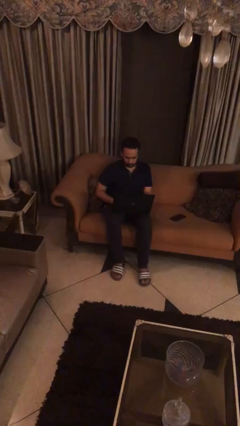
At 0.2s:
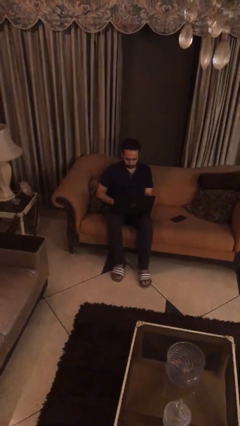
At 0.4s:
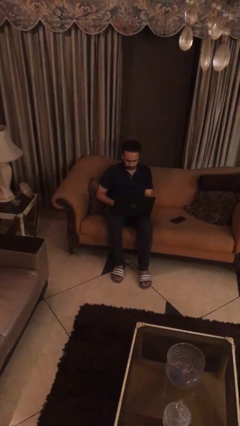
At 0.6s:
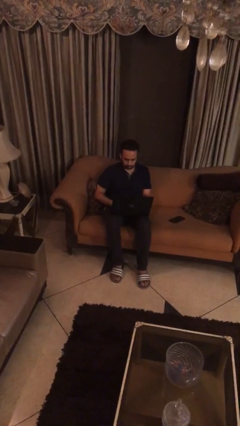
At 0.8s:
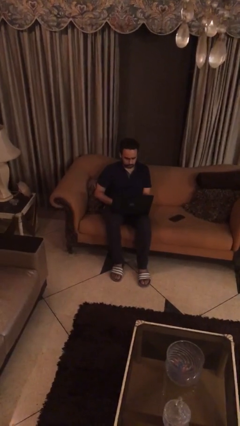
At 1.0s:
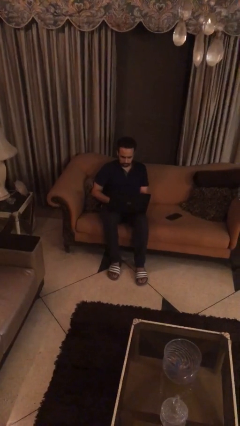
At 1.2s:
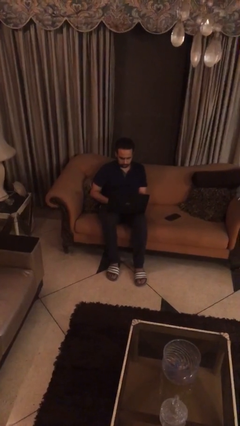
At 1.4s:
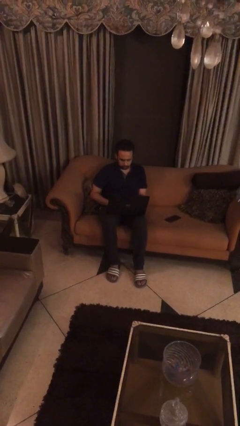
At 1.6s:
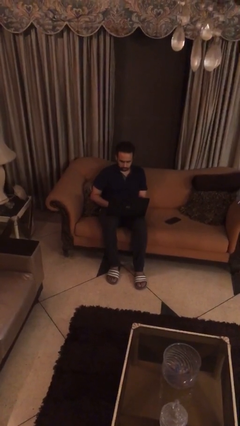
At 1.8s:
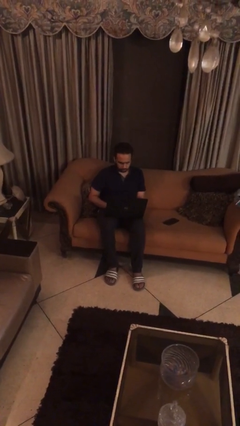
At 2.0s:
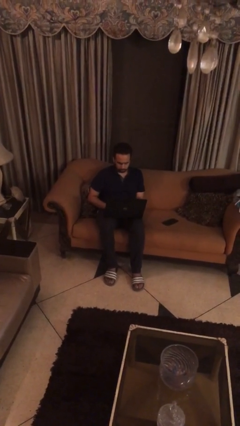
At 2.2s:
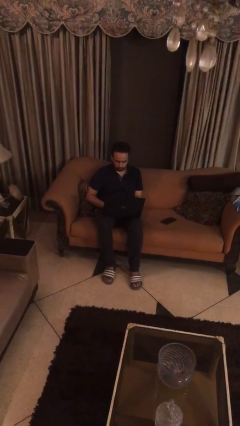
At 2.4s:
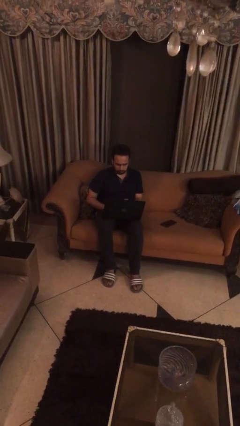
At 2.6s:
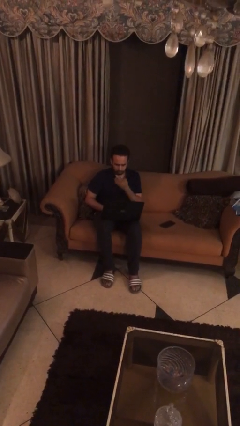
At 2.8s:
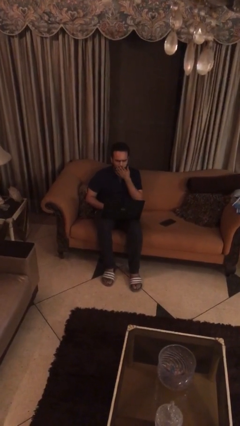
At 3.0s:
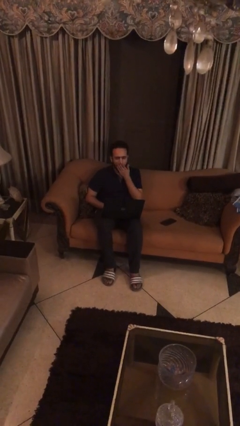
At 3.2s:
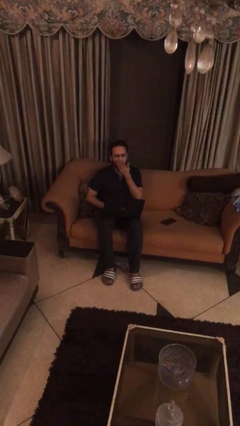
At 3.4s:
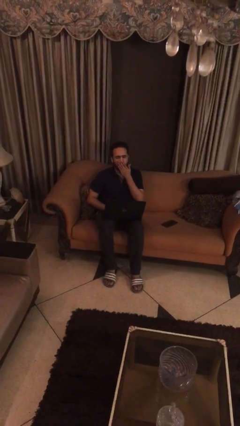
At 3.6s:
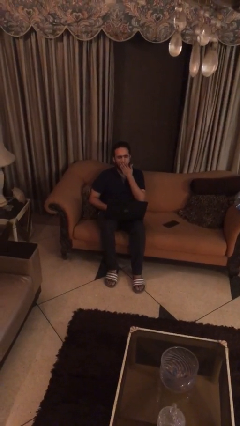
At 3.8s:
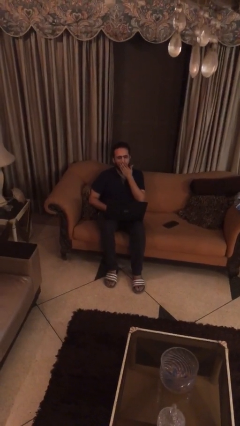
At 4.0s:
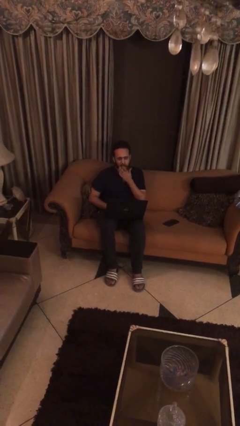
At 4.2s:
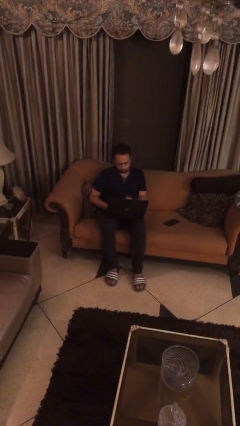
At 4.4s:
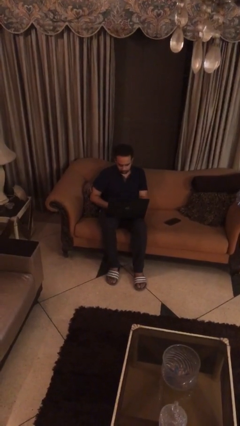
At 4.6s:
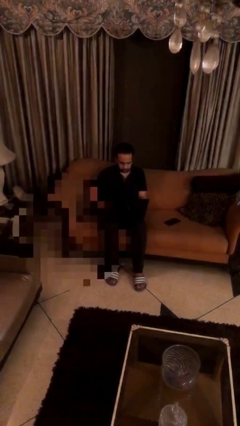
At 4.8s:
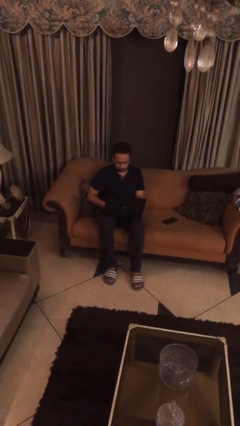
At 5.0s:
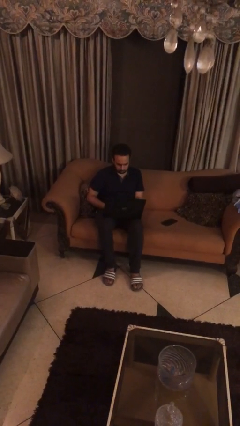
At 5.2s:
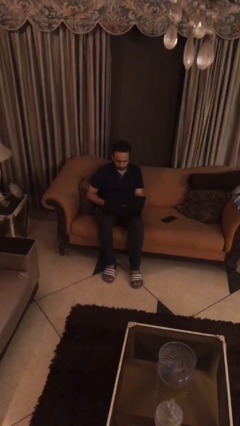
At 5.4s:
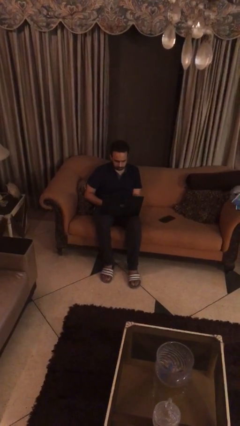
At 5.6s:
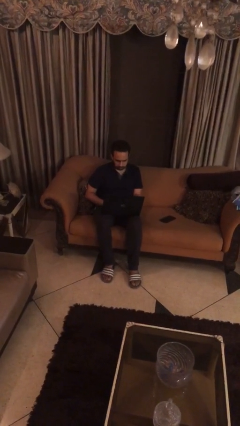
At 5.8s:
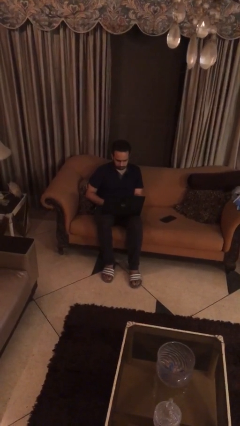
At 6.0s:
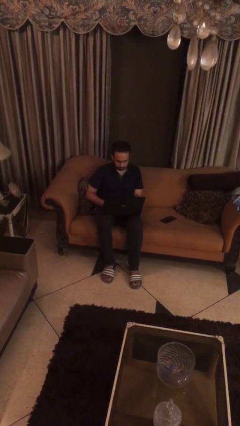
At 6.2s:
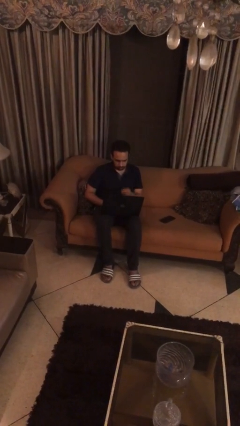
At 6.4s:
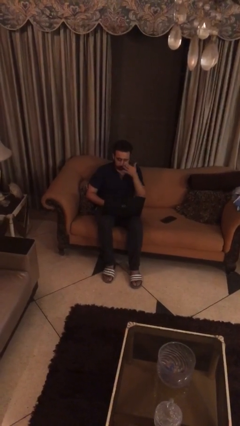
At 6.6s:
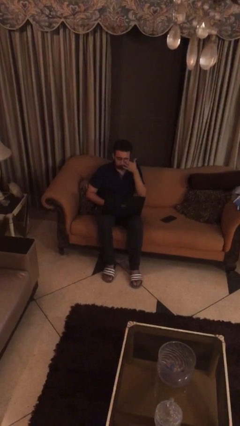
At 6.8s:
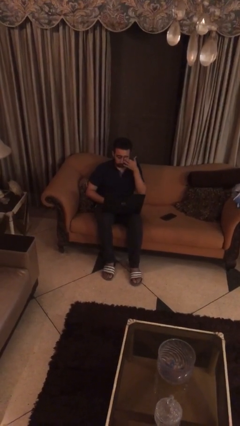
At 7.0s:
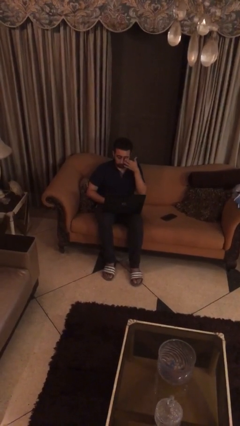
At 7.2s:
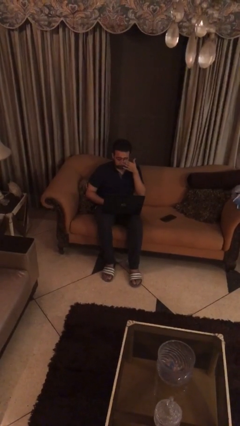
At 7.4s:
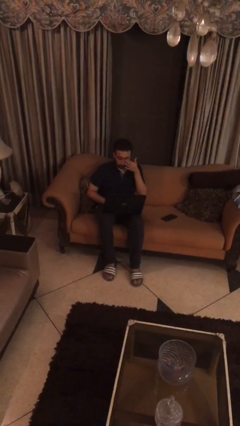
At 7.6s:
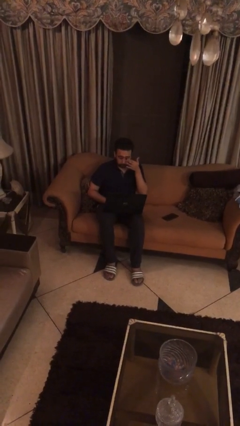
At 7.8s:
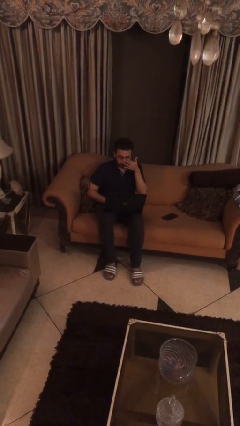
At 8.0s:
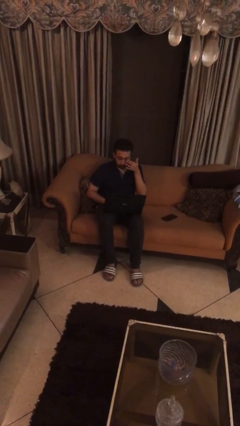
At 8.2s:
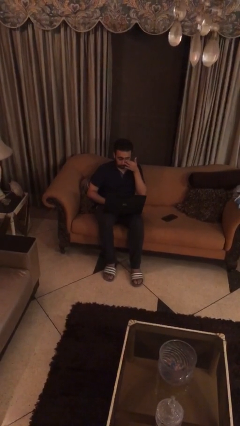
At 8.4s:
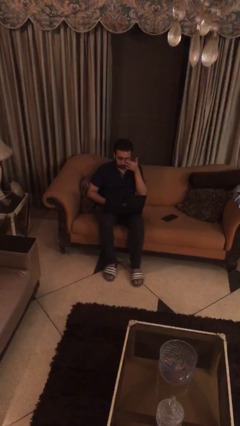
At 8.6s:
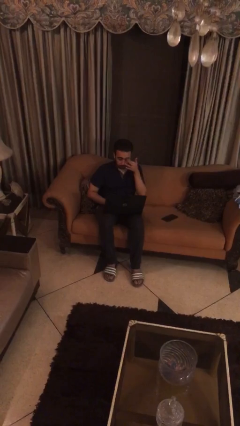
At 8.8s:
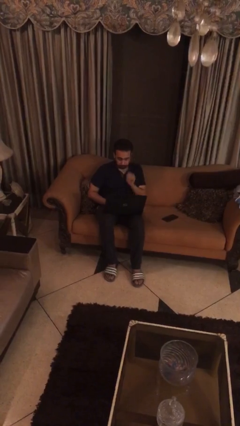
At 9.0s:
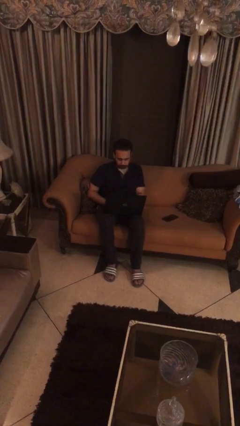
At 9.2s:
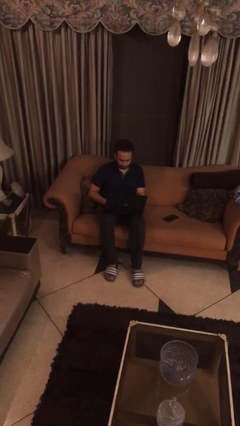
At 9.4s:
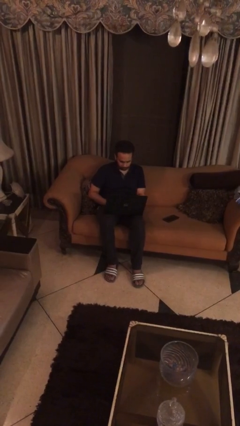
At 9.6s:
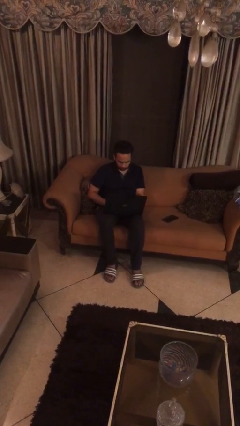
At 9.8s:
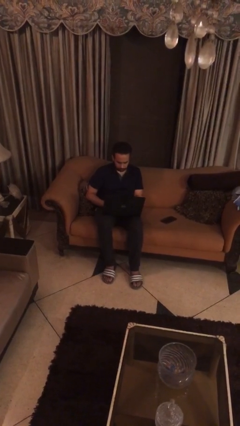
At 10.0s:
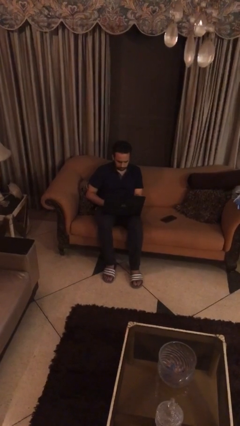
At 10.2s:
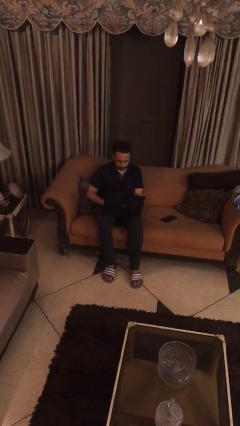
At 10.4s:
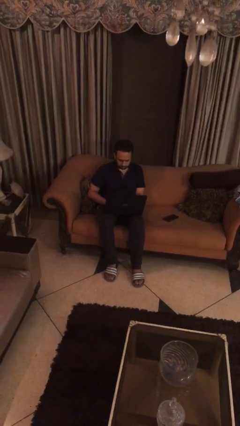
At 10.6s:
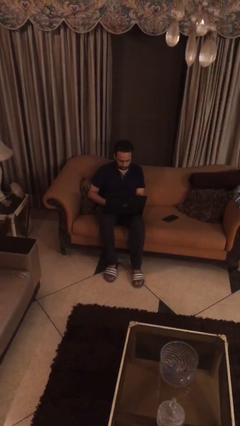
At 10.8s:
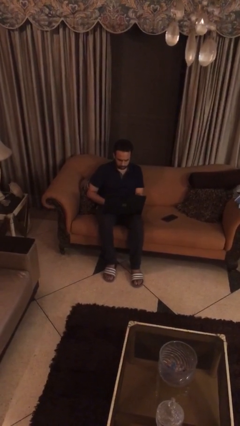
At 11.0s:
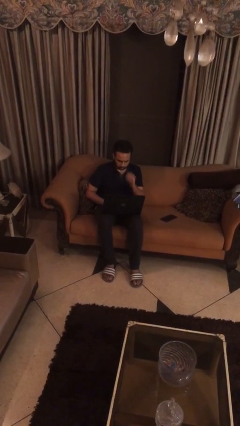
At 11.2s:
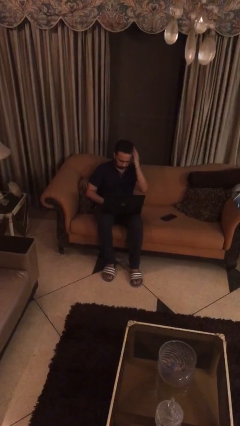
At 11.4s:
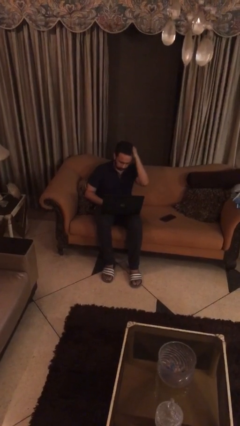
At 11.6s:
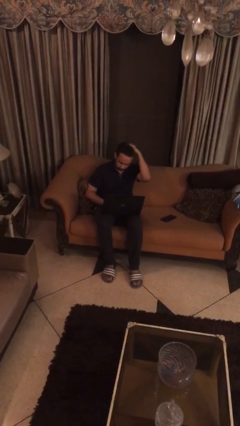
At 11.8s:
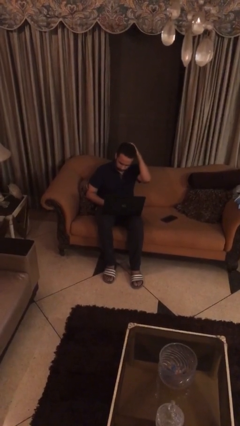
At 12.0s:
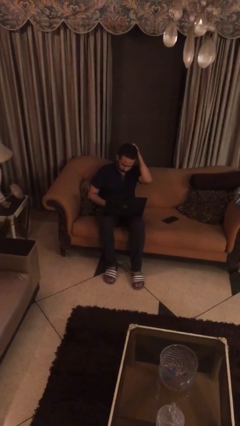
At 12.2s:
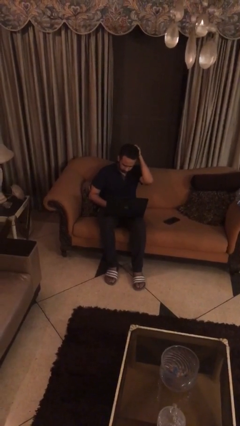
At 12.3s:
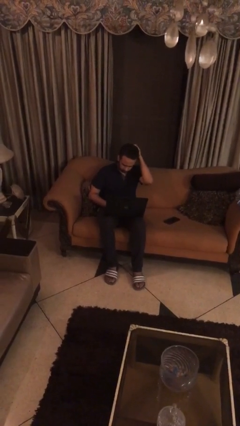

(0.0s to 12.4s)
person interacts with laptop

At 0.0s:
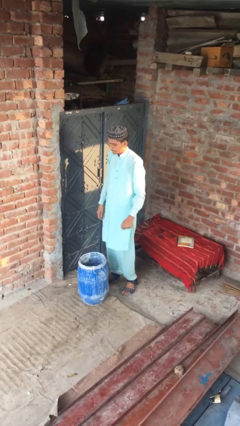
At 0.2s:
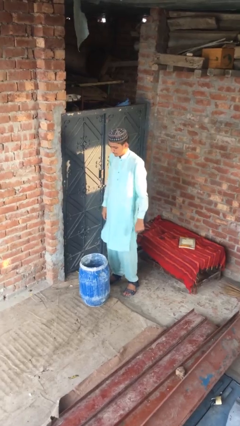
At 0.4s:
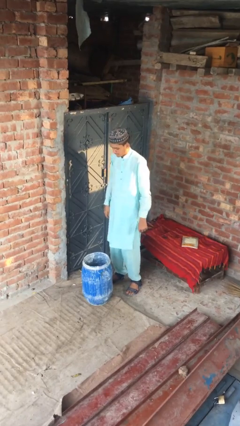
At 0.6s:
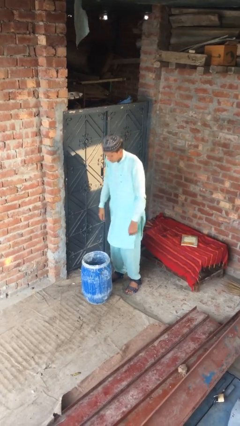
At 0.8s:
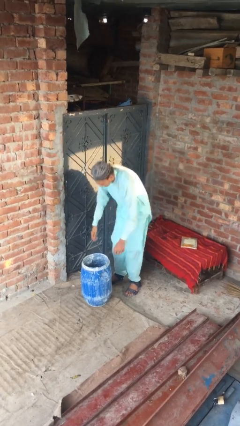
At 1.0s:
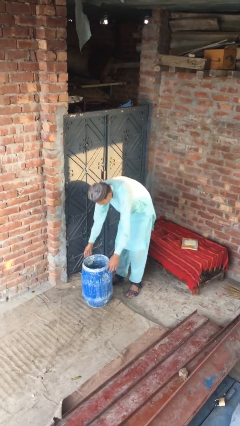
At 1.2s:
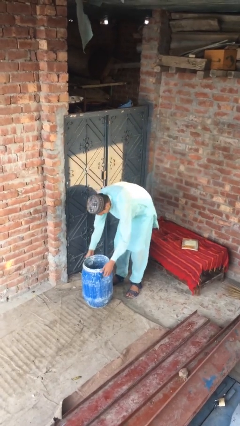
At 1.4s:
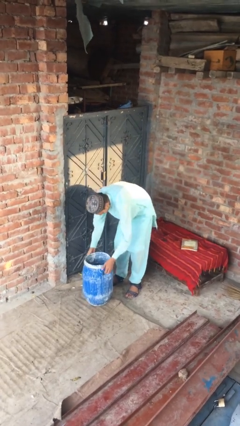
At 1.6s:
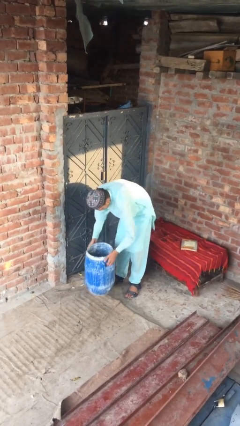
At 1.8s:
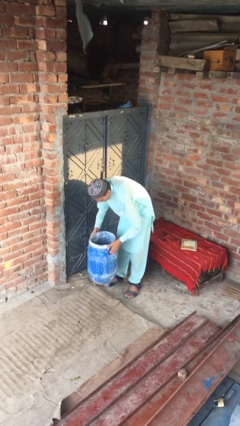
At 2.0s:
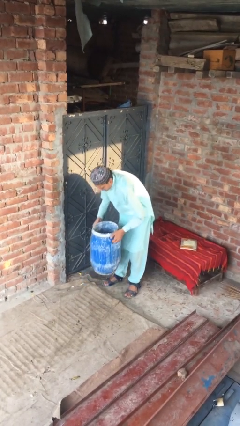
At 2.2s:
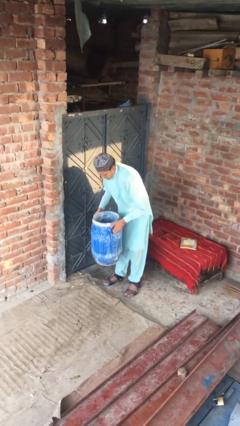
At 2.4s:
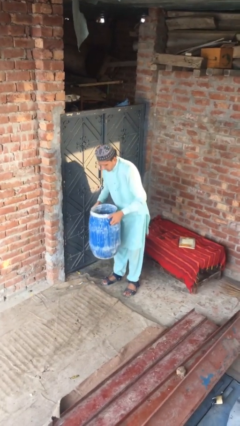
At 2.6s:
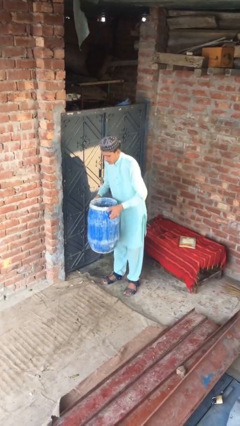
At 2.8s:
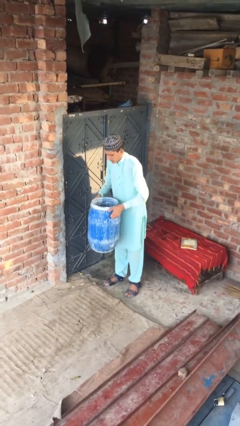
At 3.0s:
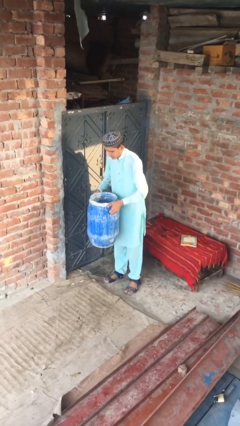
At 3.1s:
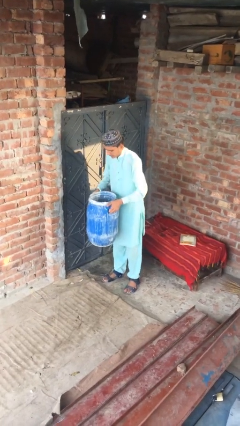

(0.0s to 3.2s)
person picks up object from floor

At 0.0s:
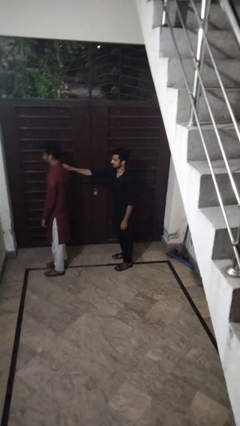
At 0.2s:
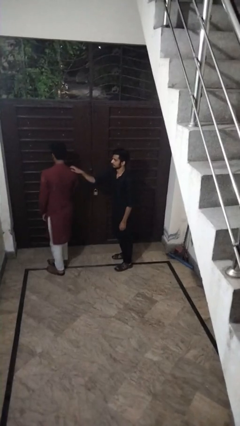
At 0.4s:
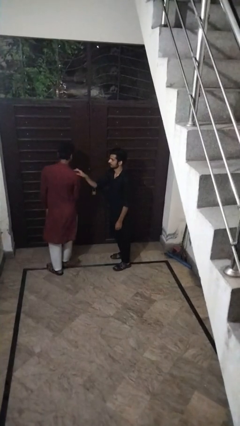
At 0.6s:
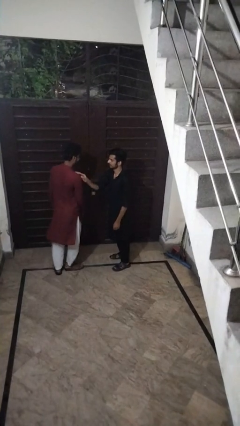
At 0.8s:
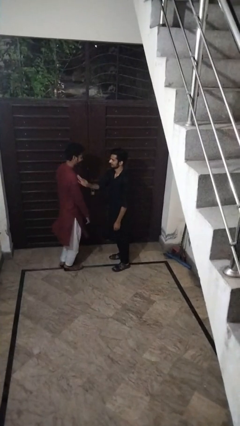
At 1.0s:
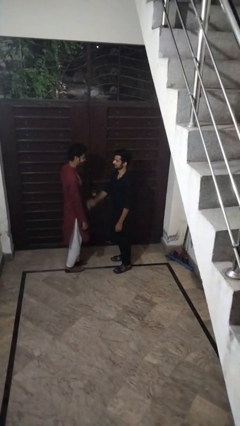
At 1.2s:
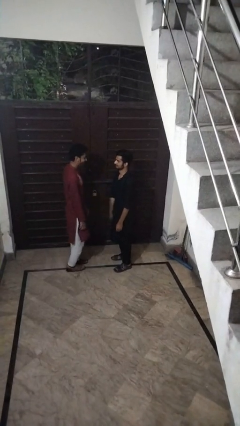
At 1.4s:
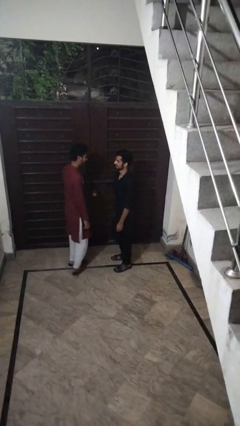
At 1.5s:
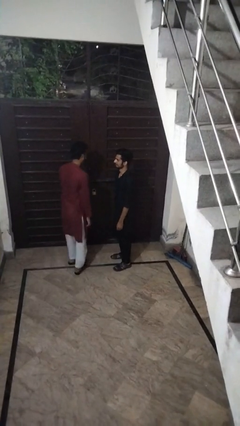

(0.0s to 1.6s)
person spins person around

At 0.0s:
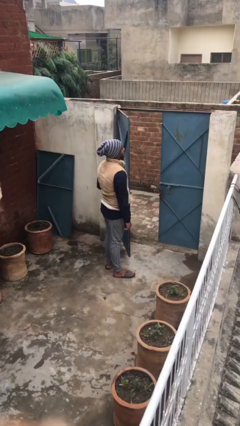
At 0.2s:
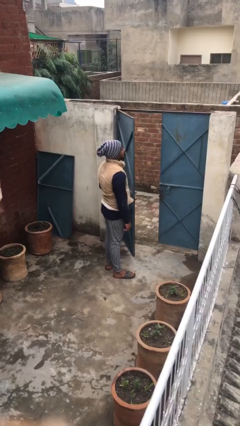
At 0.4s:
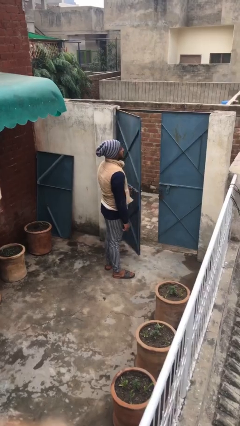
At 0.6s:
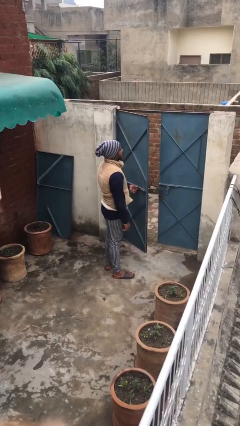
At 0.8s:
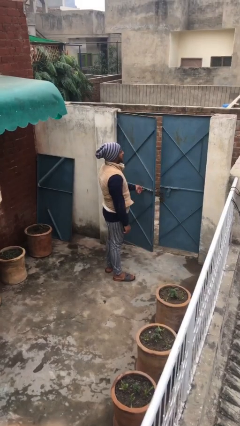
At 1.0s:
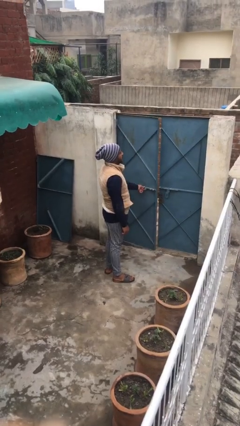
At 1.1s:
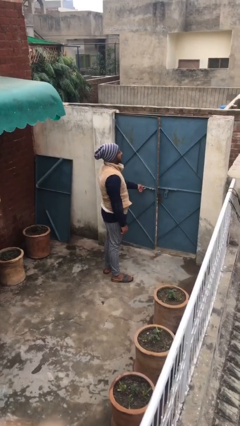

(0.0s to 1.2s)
person closes facility door
